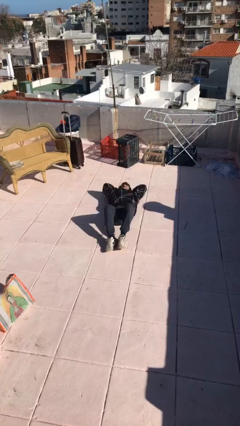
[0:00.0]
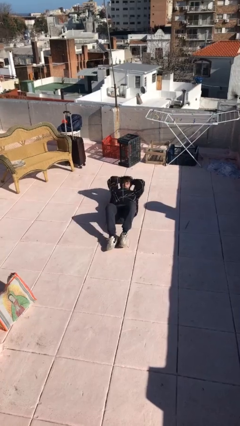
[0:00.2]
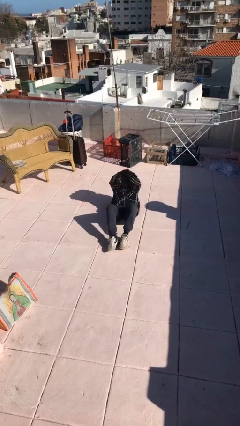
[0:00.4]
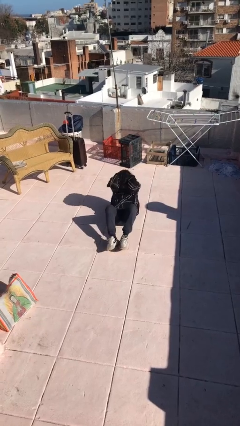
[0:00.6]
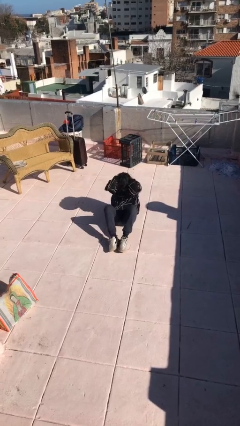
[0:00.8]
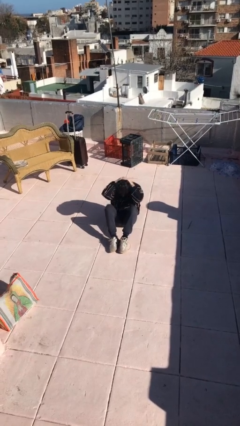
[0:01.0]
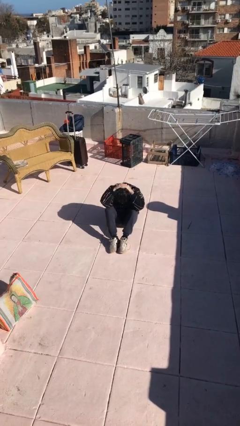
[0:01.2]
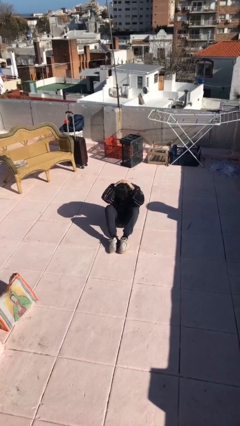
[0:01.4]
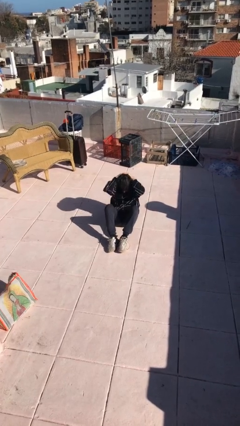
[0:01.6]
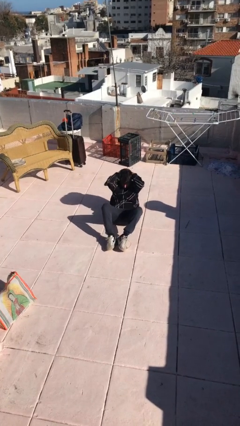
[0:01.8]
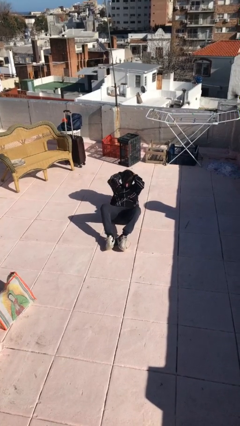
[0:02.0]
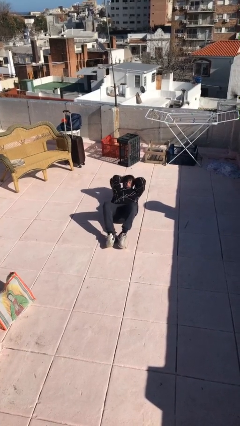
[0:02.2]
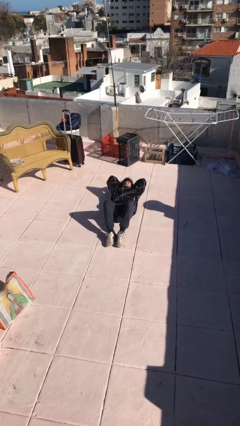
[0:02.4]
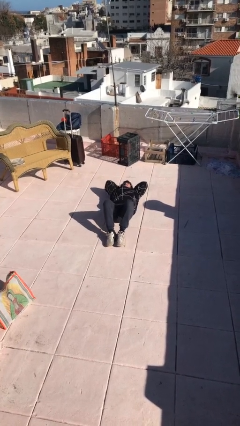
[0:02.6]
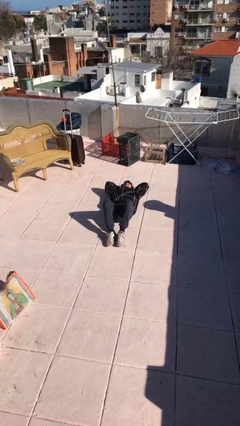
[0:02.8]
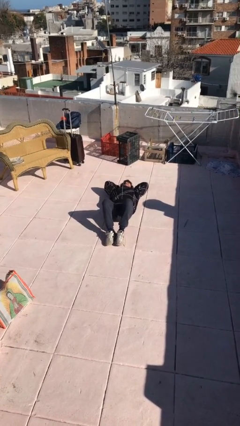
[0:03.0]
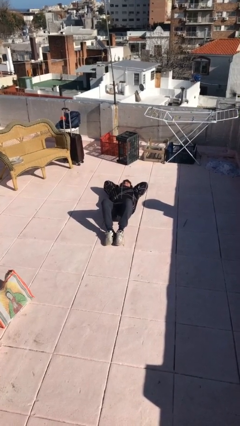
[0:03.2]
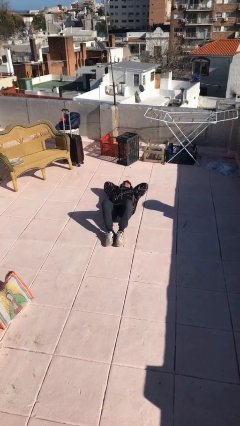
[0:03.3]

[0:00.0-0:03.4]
person exercises with situp

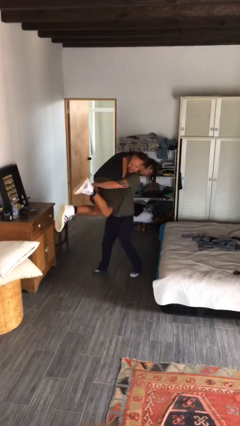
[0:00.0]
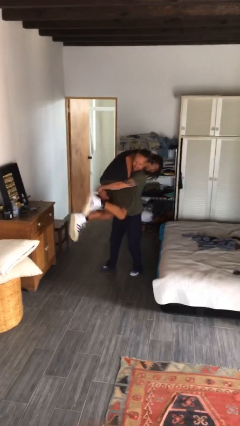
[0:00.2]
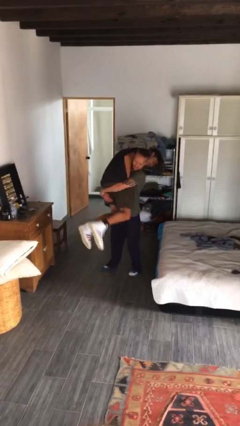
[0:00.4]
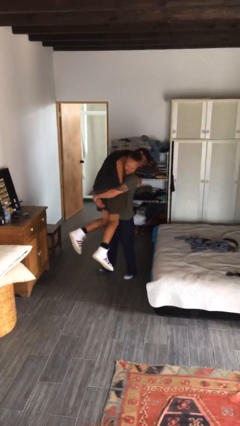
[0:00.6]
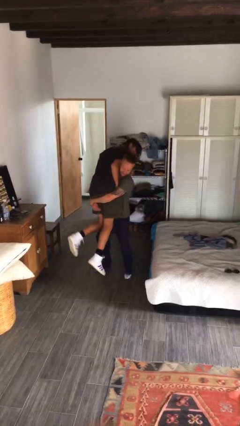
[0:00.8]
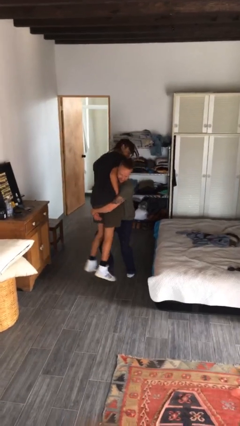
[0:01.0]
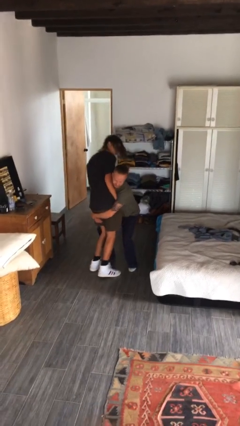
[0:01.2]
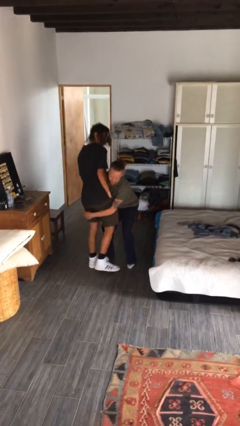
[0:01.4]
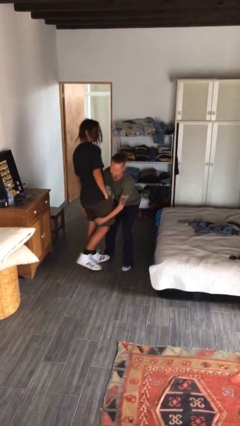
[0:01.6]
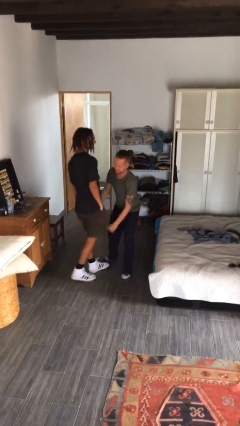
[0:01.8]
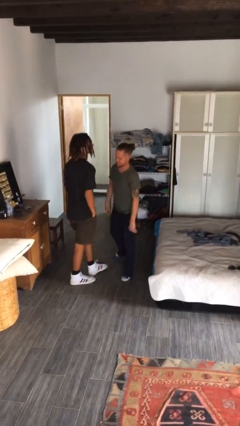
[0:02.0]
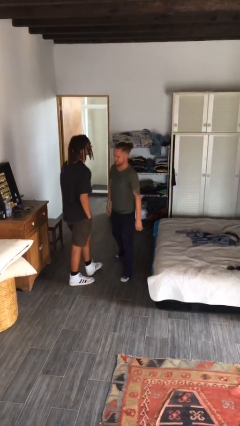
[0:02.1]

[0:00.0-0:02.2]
person puts down person

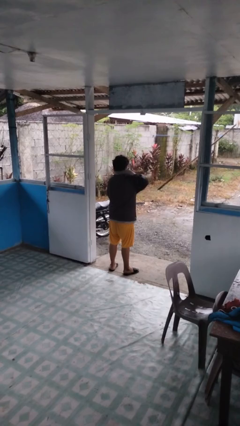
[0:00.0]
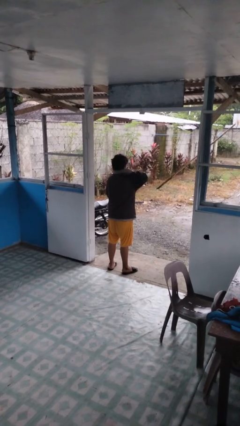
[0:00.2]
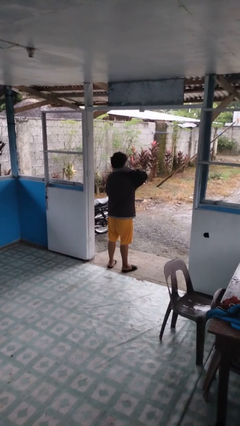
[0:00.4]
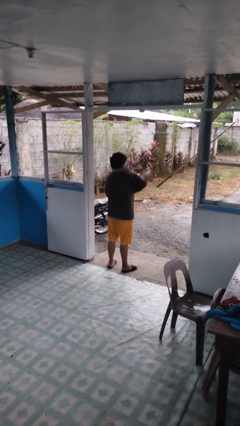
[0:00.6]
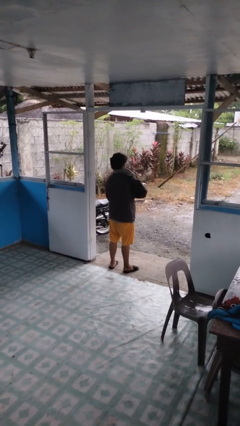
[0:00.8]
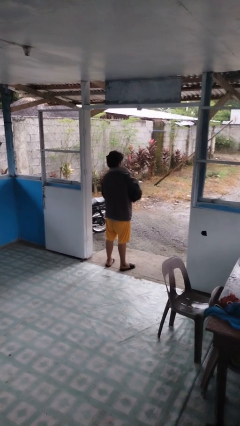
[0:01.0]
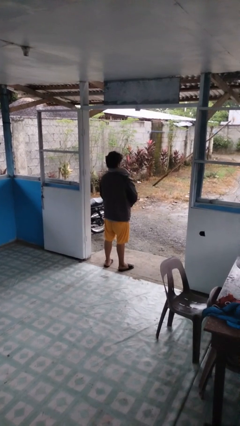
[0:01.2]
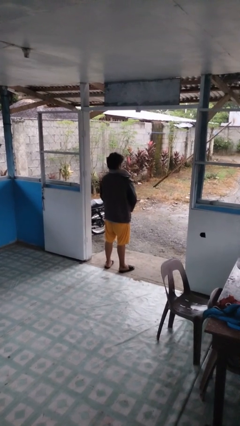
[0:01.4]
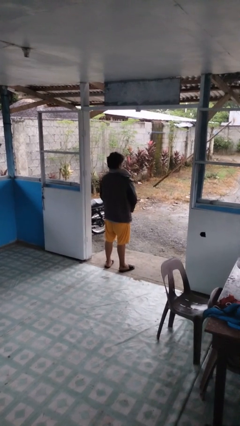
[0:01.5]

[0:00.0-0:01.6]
person unzips jacket

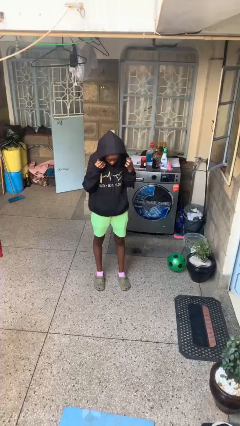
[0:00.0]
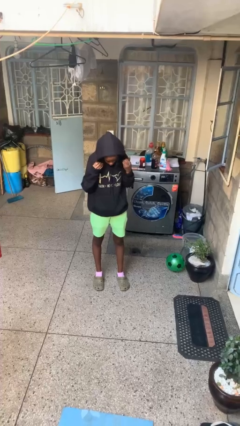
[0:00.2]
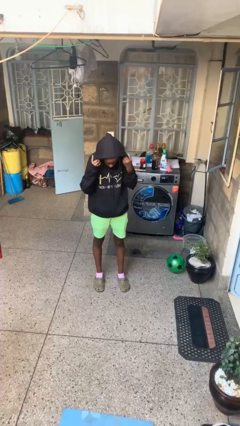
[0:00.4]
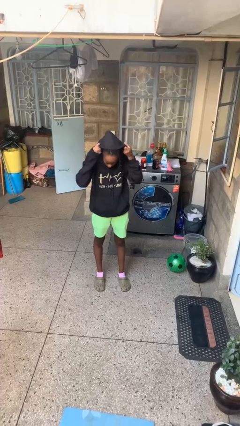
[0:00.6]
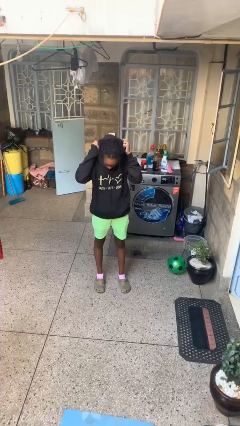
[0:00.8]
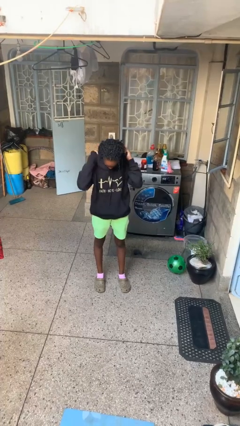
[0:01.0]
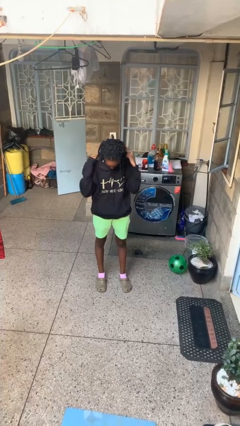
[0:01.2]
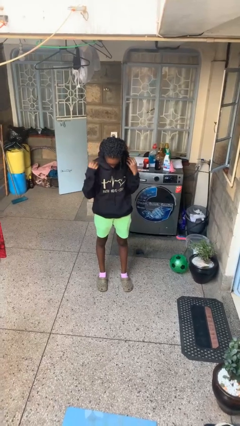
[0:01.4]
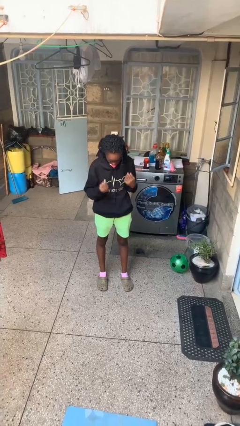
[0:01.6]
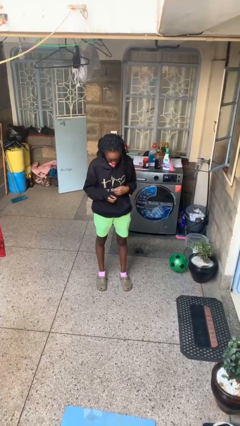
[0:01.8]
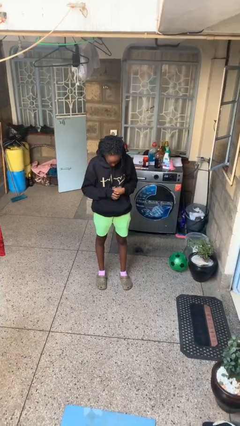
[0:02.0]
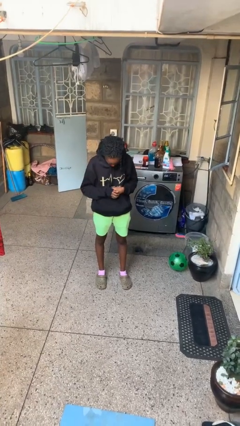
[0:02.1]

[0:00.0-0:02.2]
person takes off hoodie

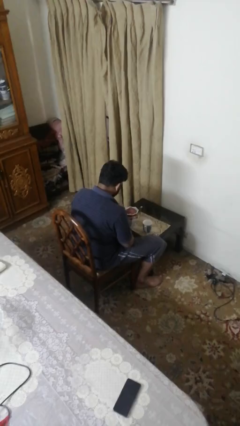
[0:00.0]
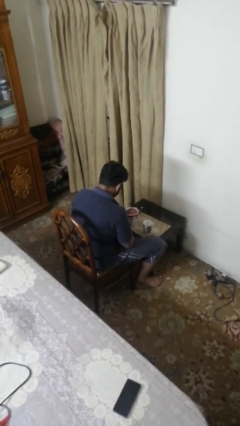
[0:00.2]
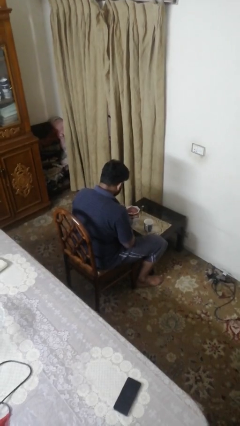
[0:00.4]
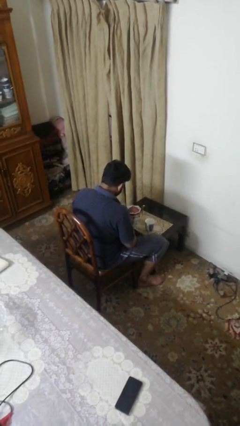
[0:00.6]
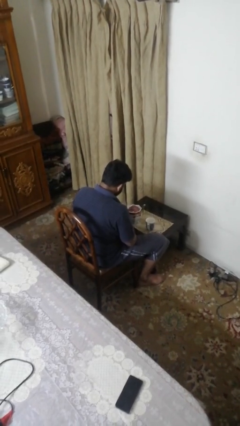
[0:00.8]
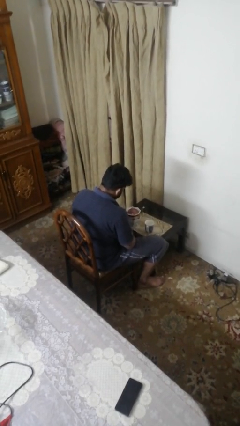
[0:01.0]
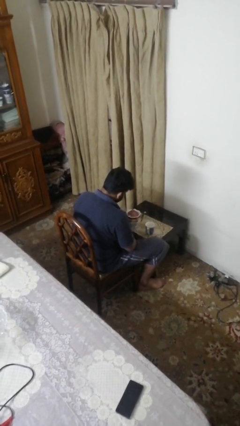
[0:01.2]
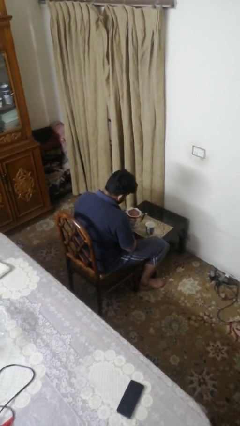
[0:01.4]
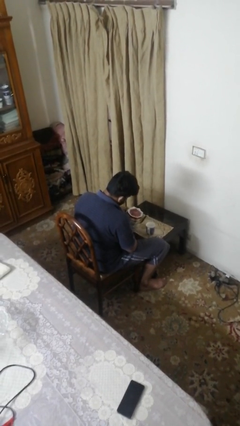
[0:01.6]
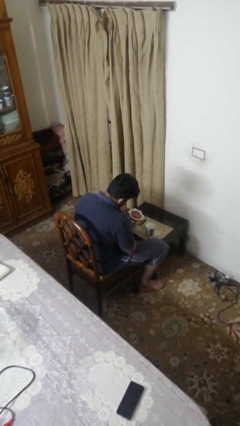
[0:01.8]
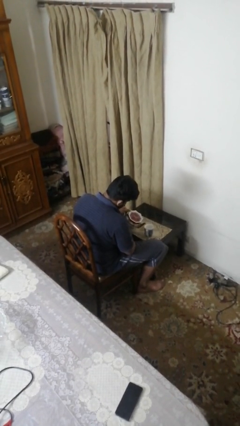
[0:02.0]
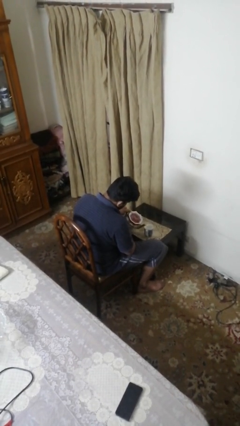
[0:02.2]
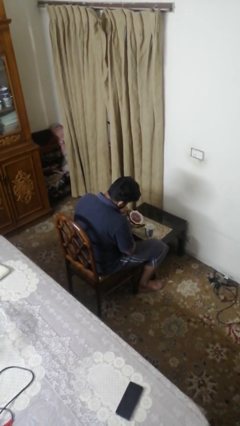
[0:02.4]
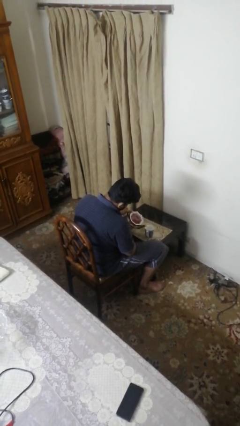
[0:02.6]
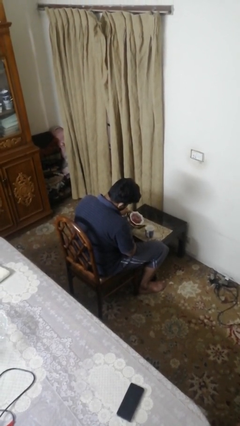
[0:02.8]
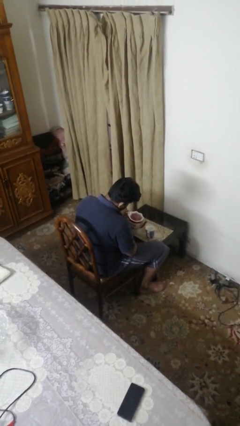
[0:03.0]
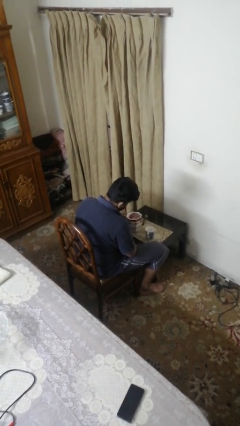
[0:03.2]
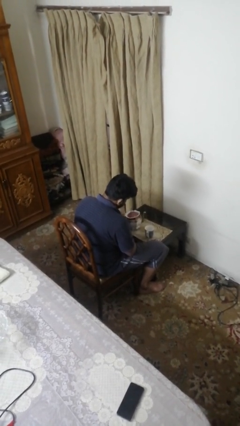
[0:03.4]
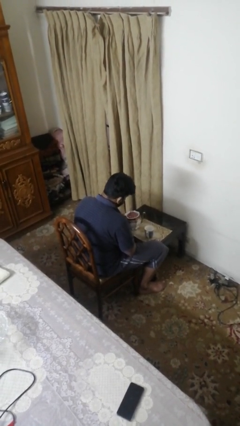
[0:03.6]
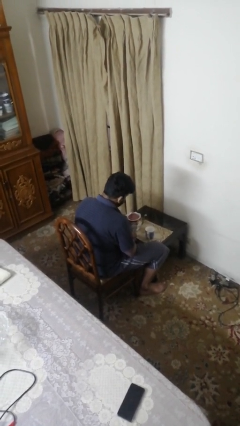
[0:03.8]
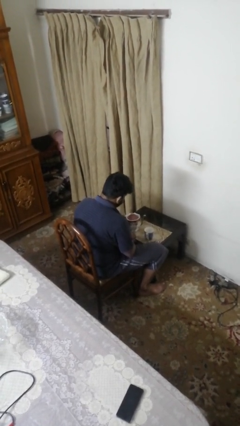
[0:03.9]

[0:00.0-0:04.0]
person pours coffee into mug

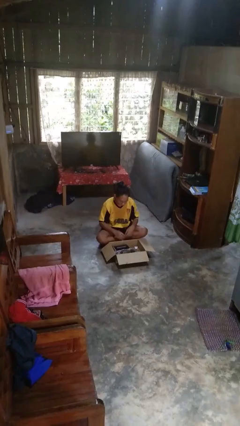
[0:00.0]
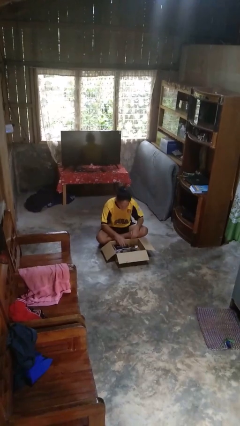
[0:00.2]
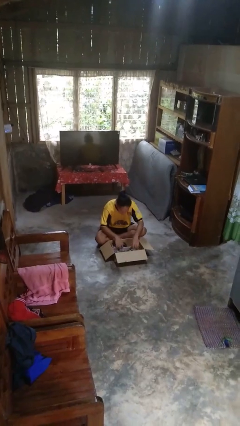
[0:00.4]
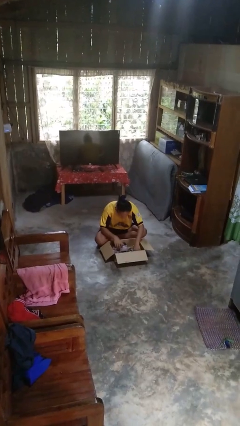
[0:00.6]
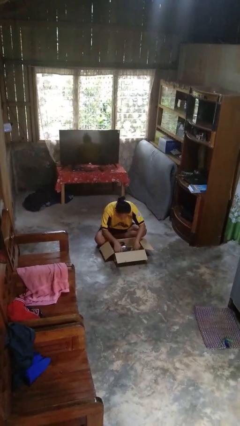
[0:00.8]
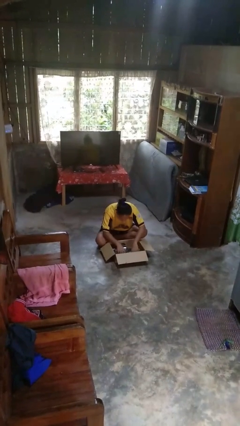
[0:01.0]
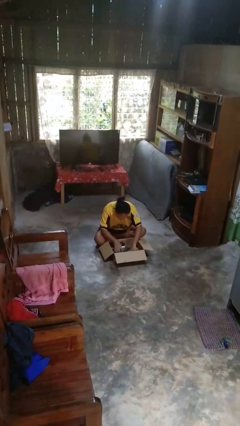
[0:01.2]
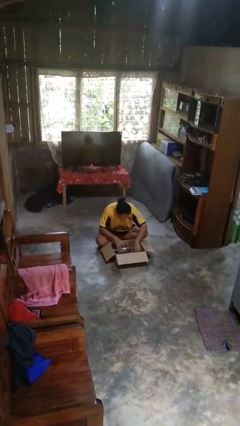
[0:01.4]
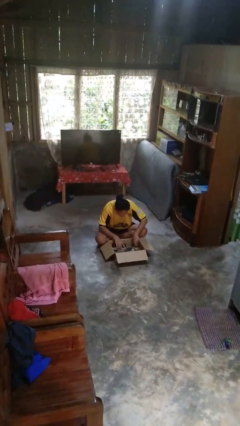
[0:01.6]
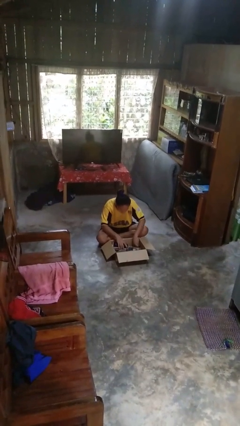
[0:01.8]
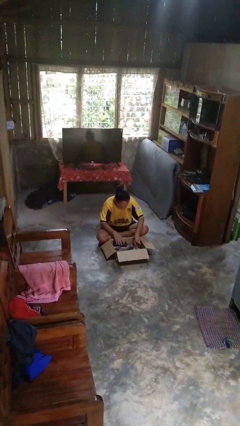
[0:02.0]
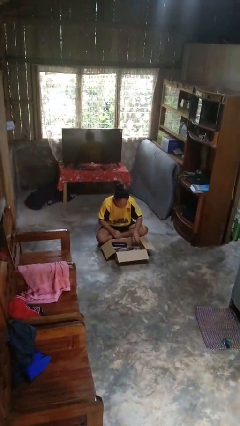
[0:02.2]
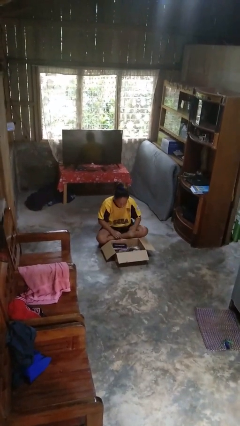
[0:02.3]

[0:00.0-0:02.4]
person searches in box

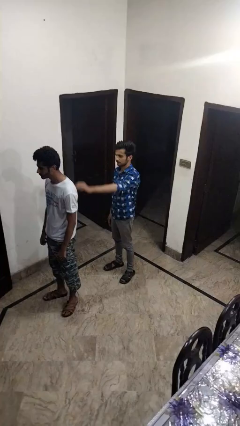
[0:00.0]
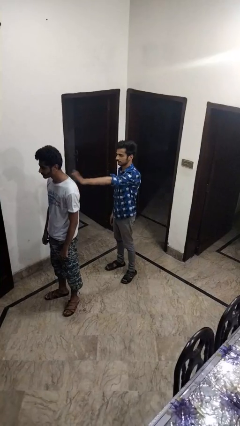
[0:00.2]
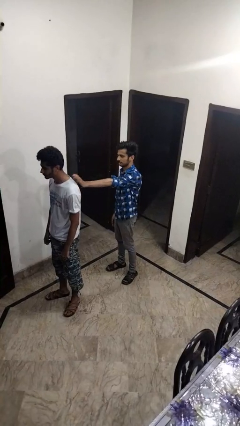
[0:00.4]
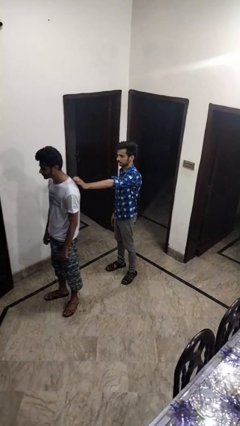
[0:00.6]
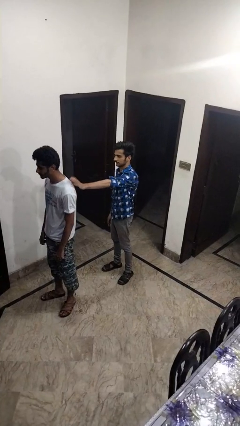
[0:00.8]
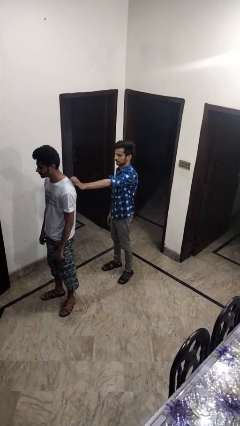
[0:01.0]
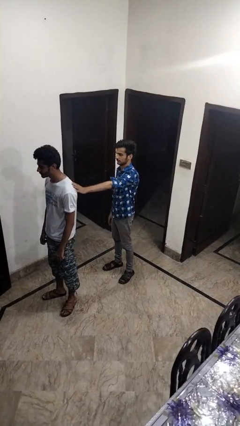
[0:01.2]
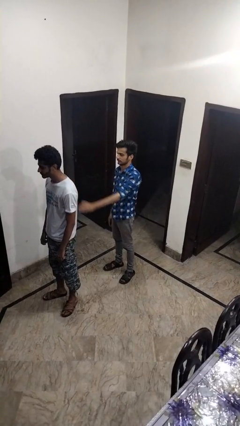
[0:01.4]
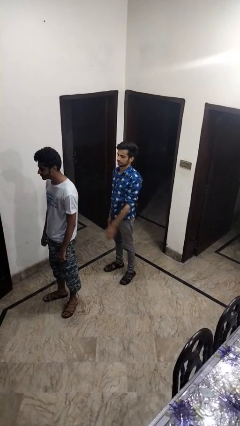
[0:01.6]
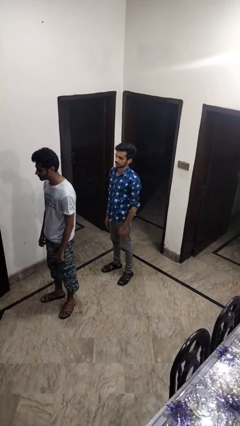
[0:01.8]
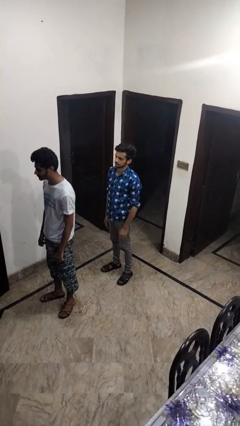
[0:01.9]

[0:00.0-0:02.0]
person touches back of person
